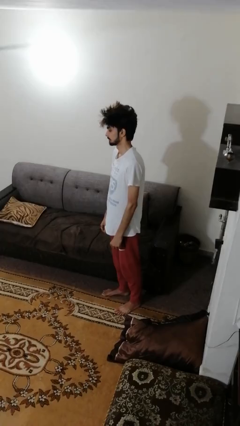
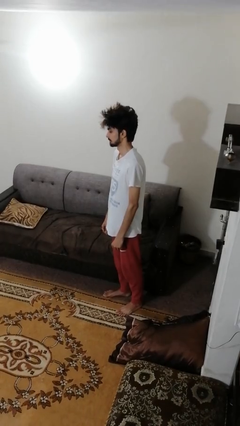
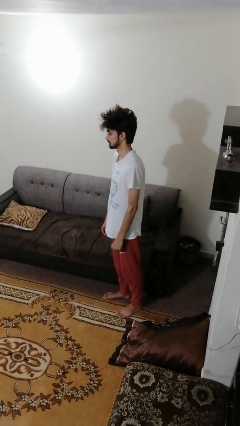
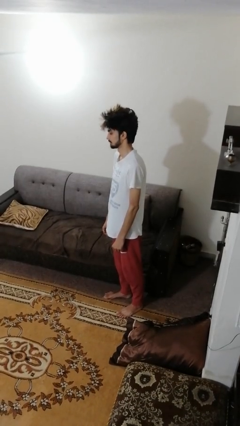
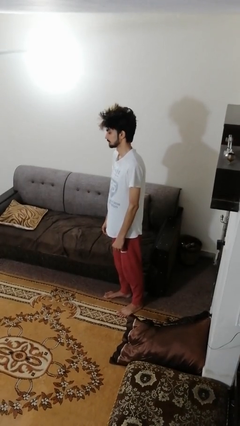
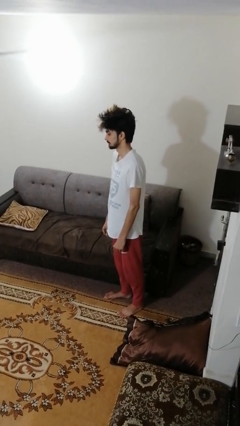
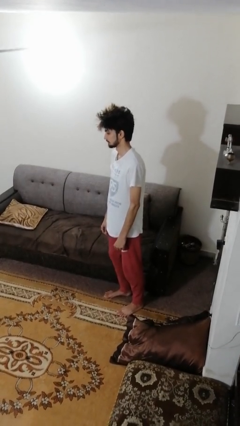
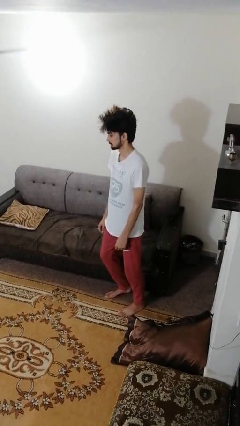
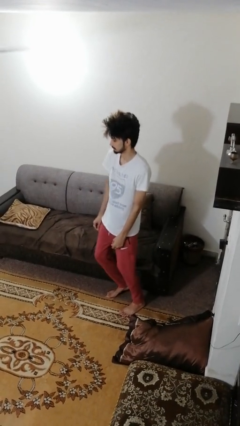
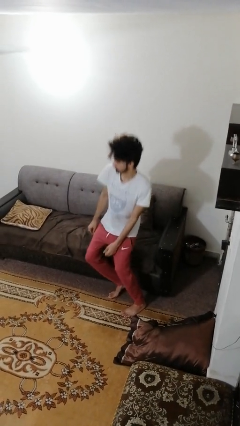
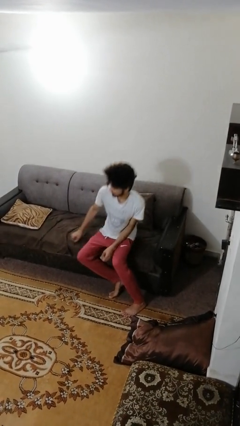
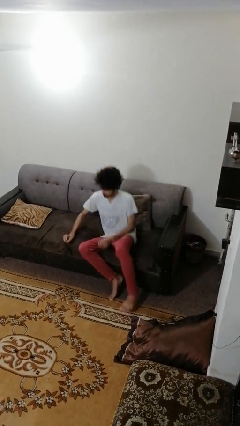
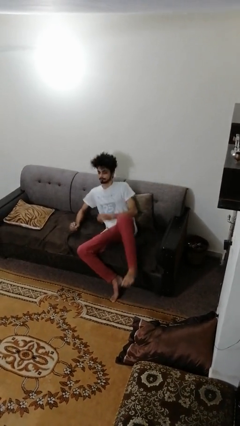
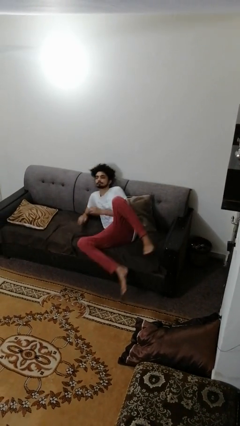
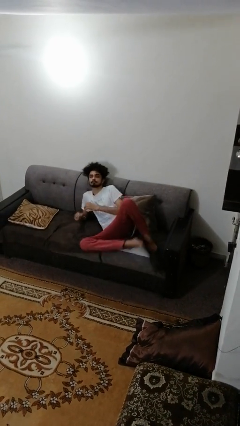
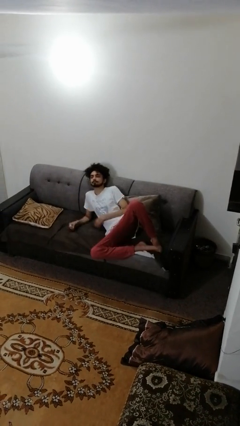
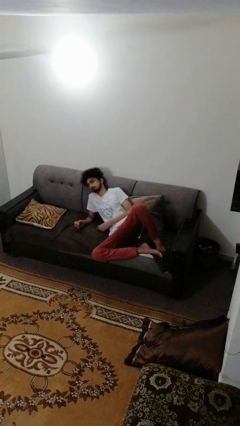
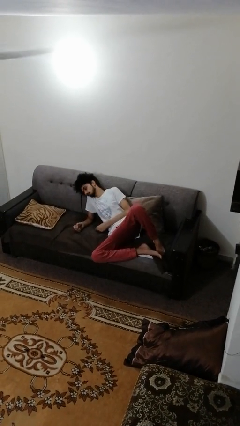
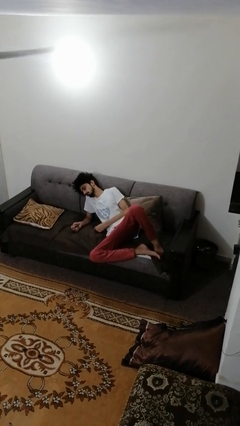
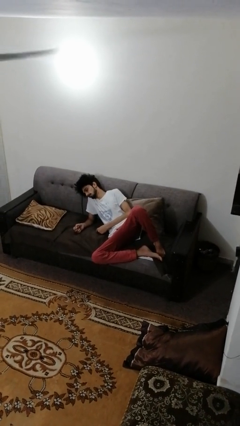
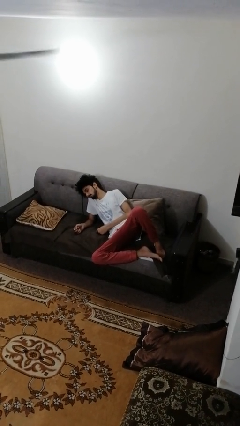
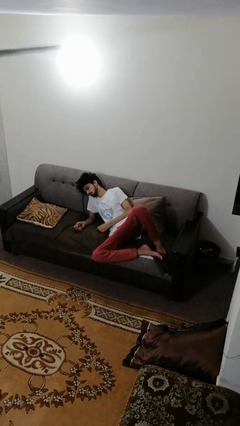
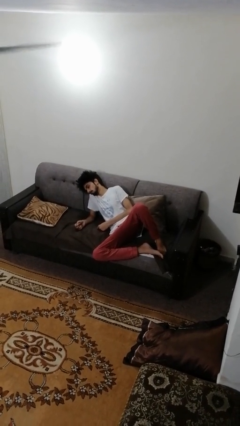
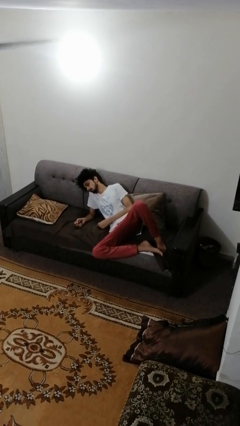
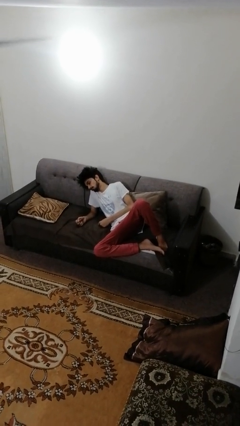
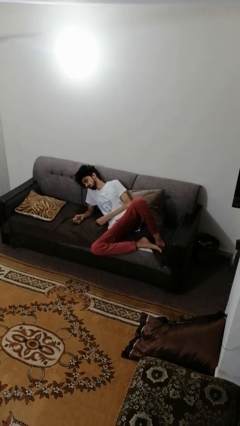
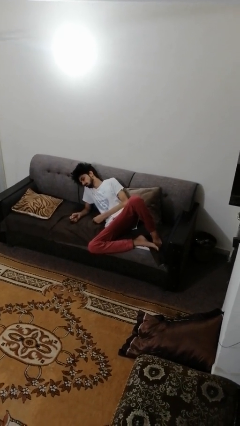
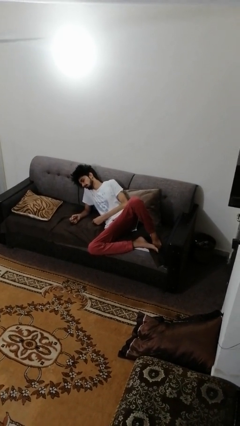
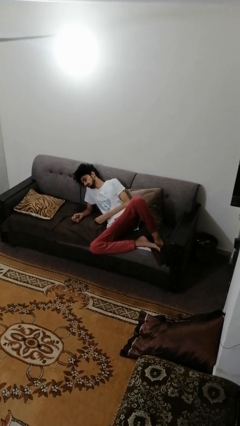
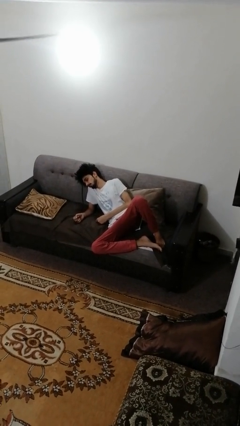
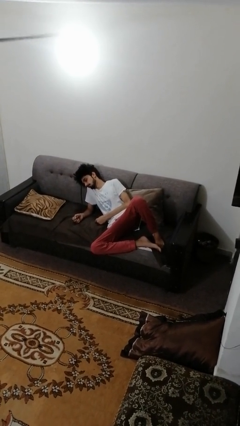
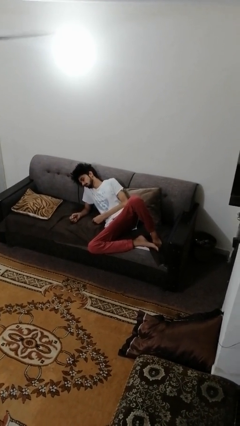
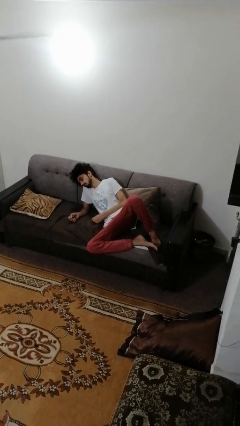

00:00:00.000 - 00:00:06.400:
person lies down on couch

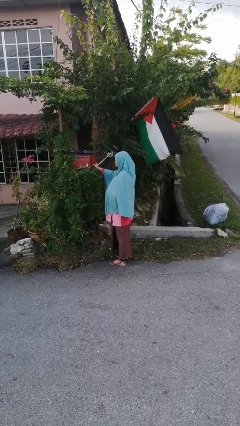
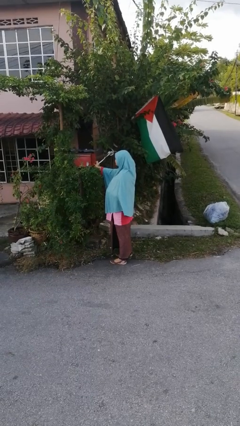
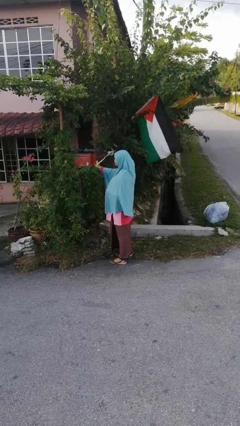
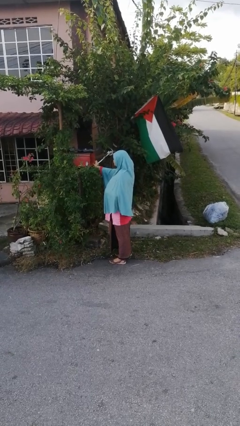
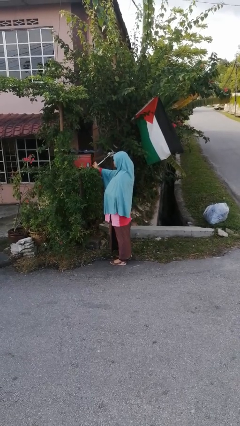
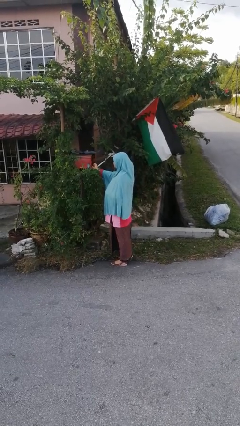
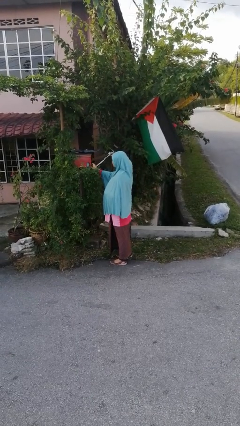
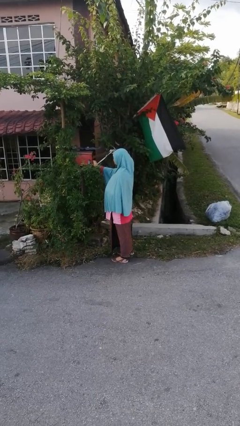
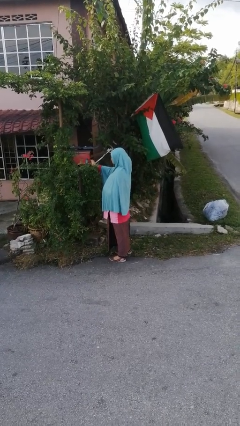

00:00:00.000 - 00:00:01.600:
person closes mailbox

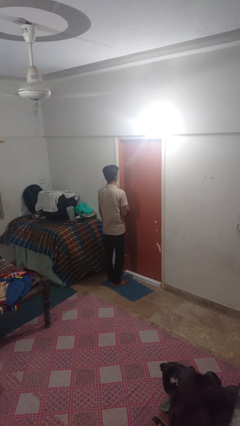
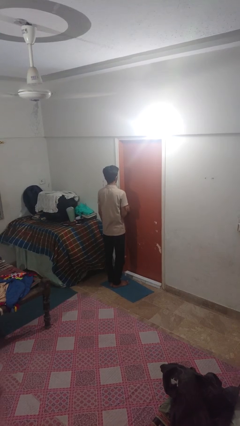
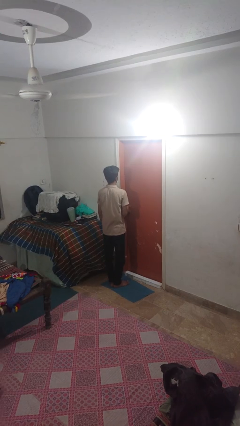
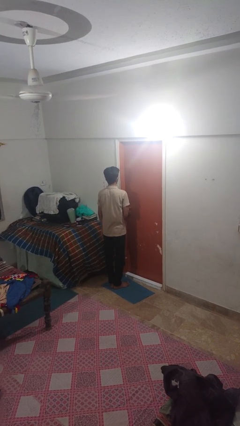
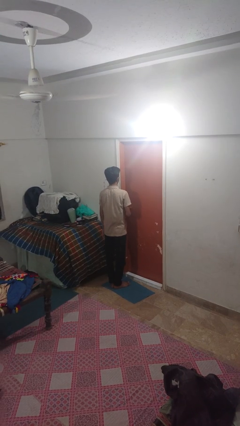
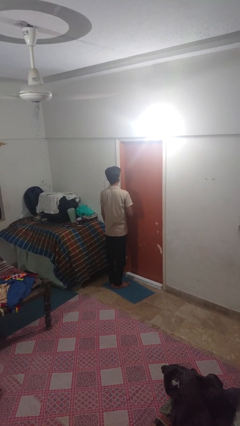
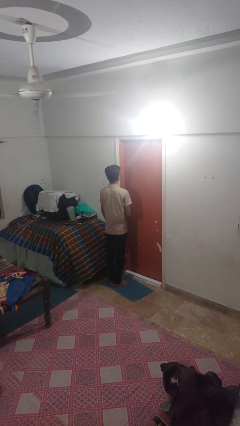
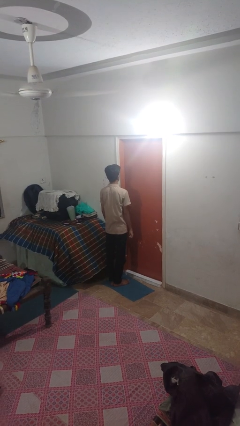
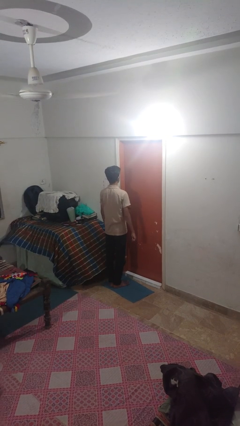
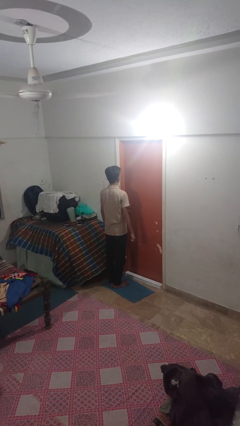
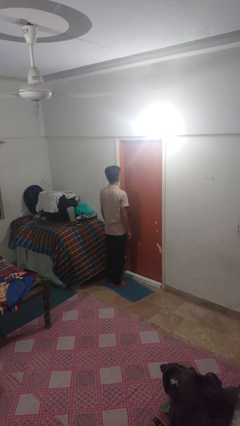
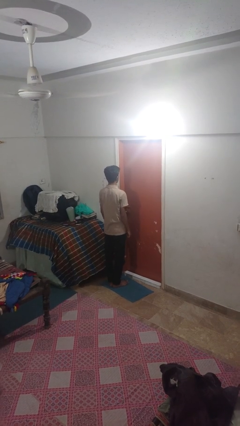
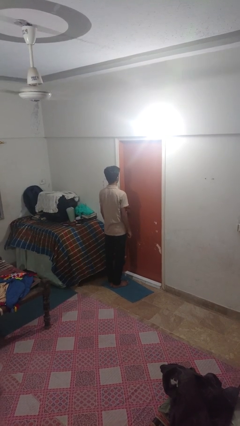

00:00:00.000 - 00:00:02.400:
person locks door with keys

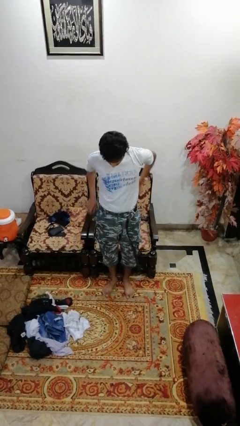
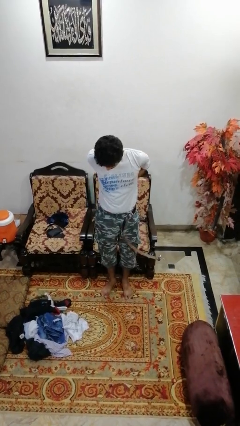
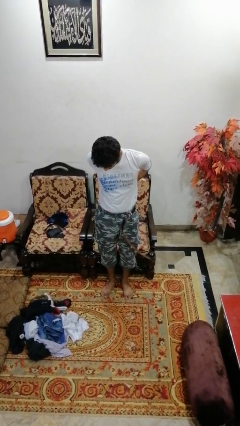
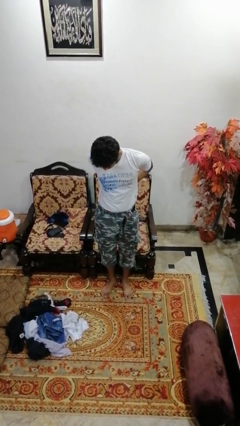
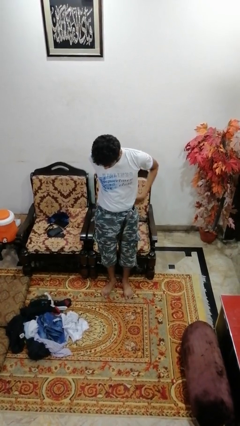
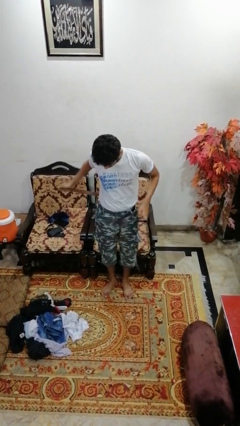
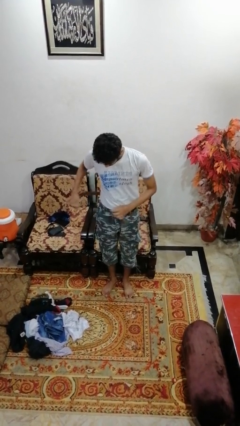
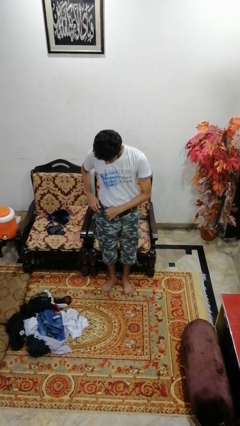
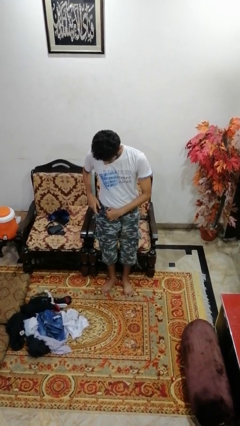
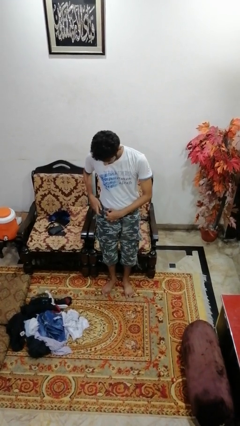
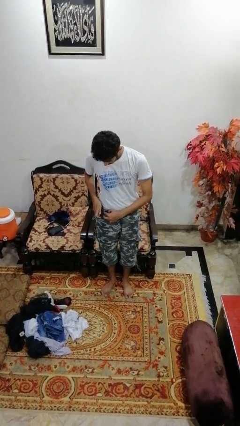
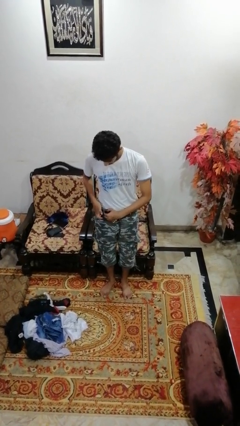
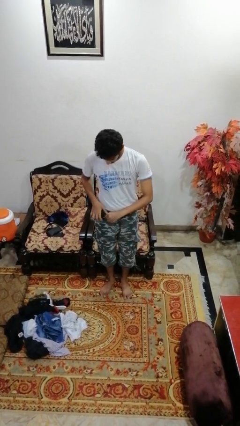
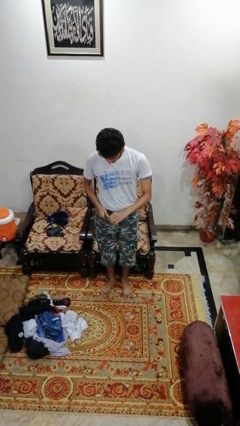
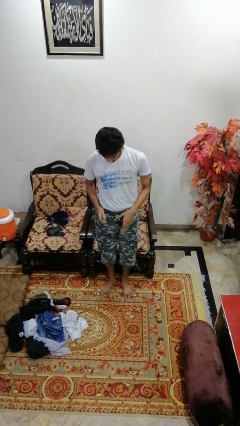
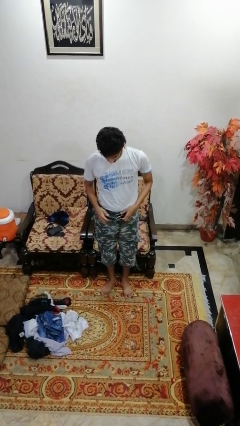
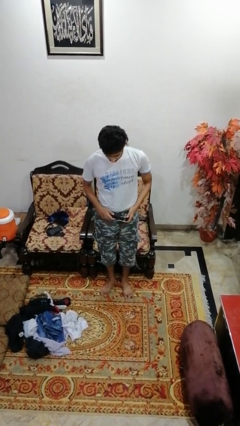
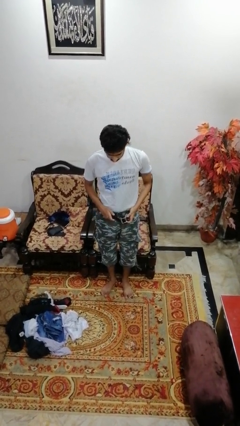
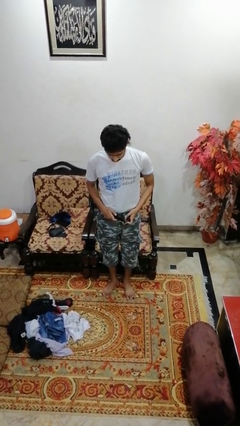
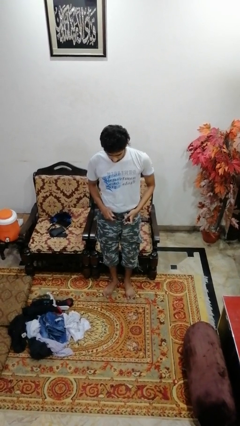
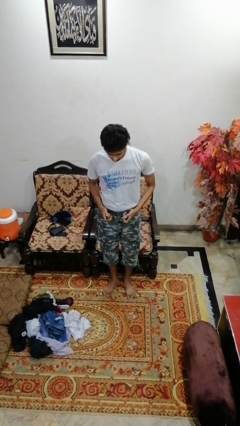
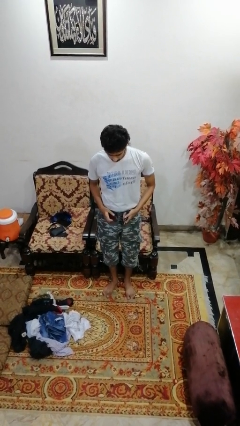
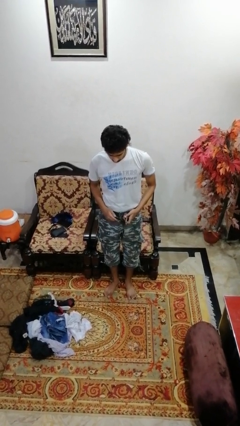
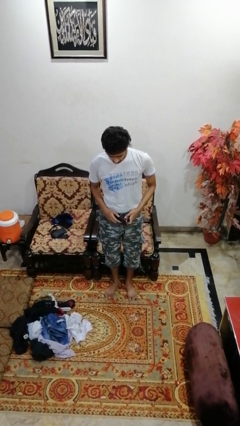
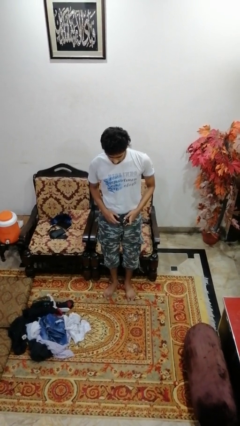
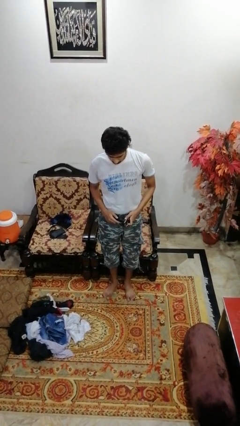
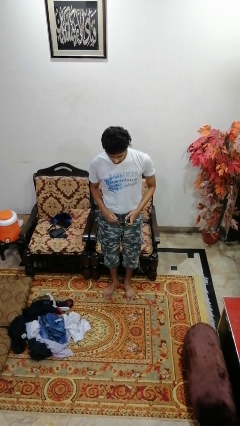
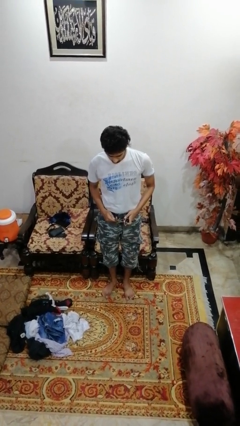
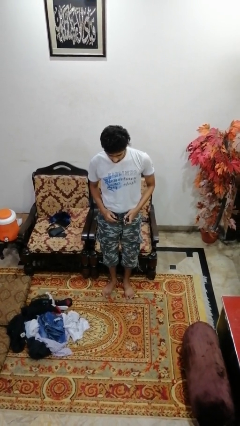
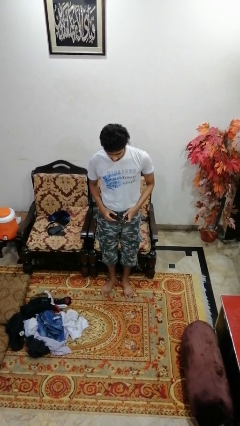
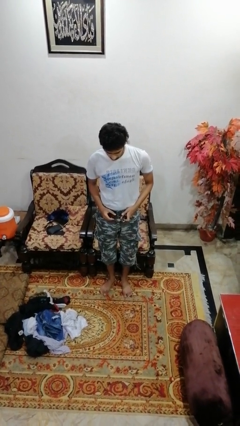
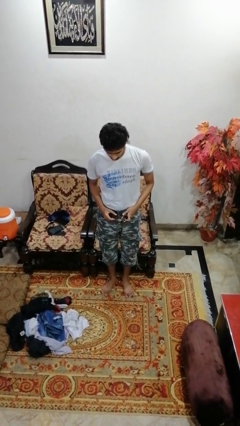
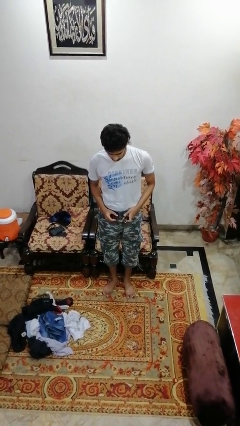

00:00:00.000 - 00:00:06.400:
person puts on belt

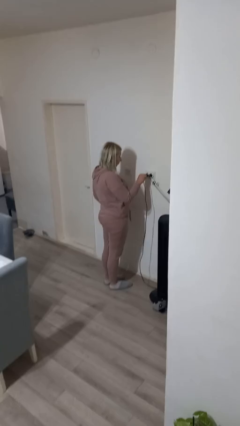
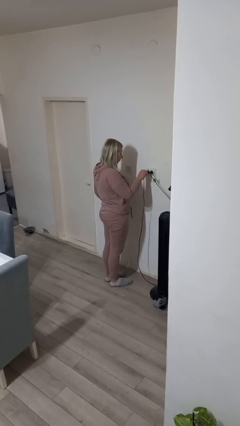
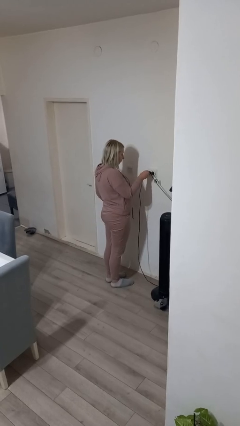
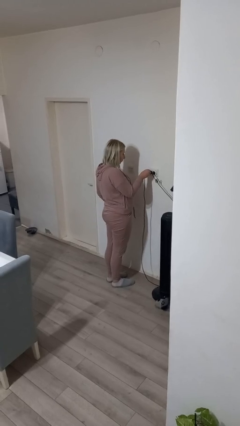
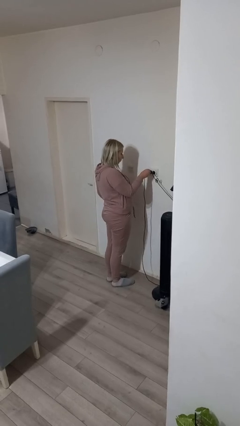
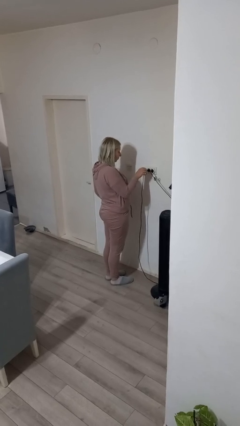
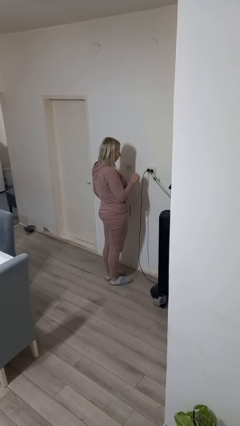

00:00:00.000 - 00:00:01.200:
person plugs into electrical socket
